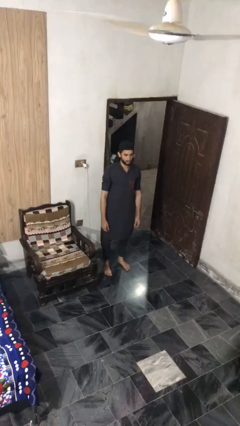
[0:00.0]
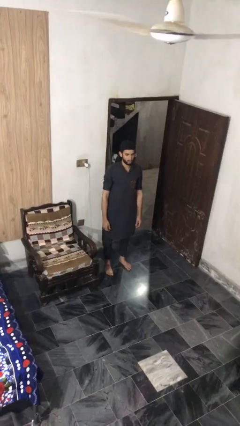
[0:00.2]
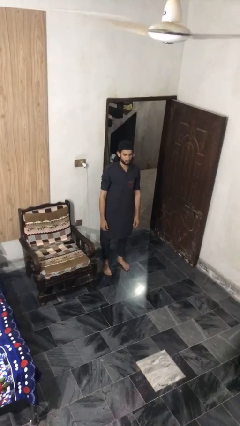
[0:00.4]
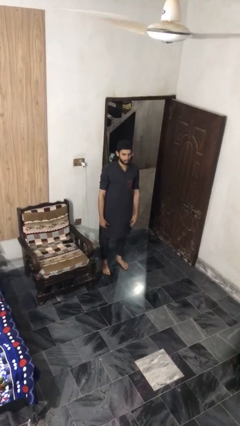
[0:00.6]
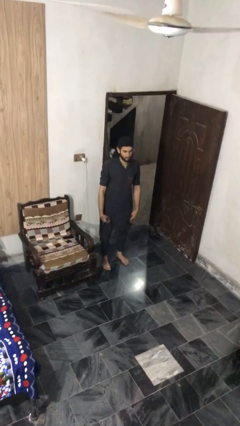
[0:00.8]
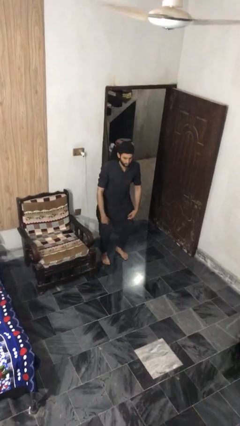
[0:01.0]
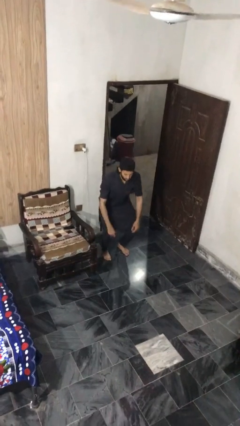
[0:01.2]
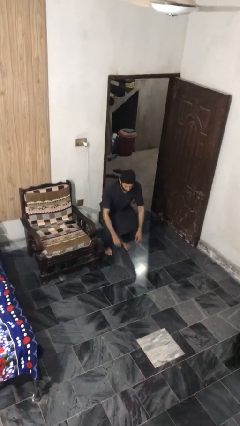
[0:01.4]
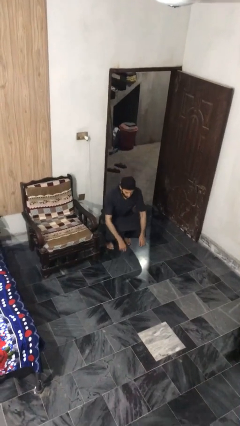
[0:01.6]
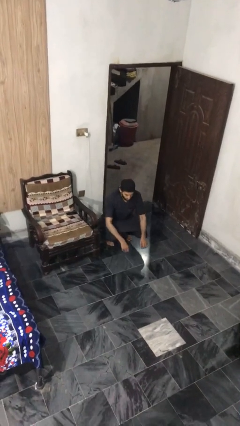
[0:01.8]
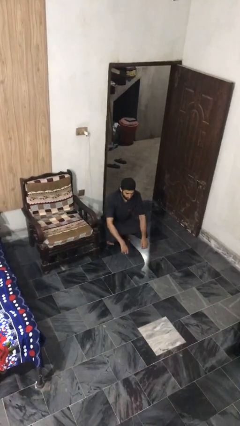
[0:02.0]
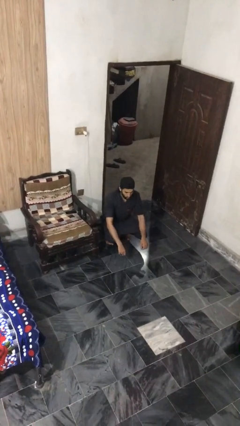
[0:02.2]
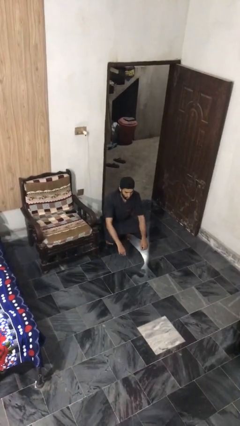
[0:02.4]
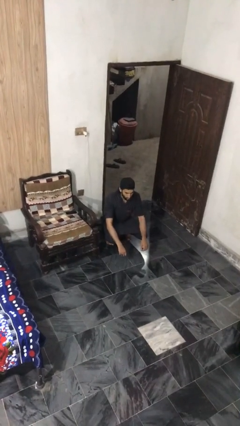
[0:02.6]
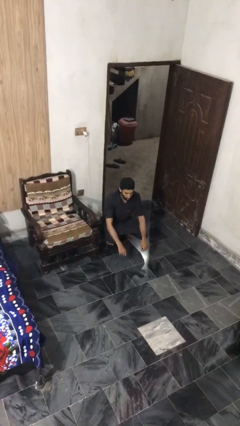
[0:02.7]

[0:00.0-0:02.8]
person squats

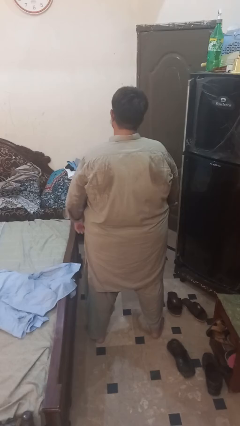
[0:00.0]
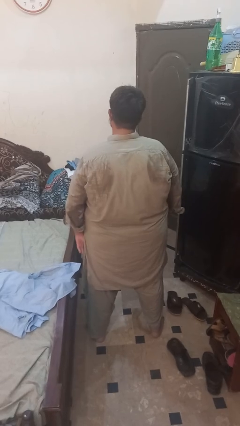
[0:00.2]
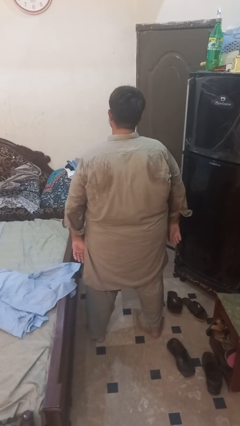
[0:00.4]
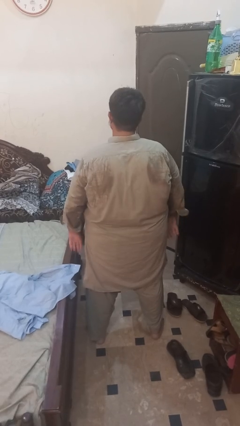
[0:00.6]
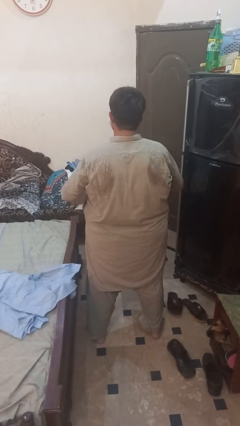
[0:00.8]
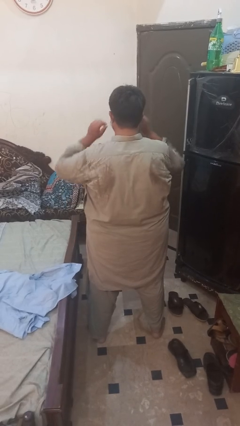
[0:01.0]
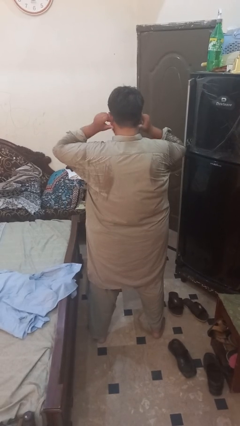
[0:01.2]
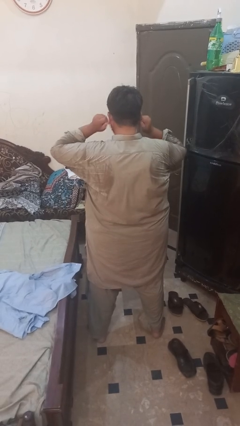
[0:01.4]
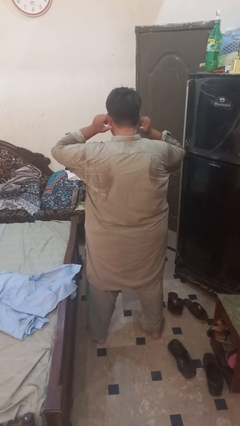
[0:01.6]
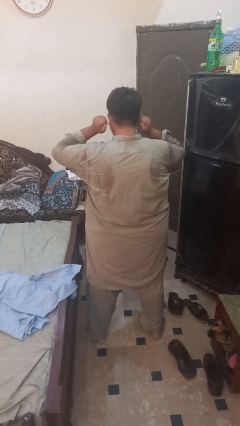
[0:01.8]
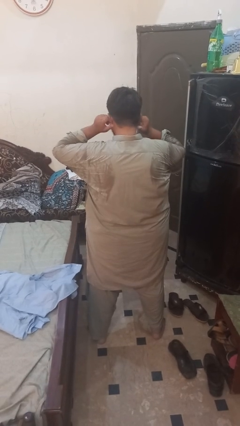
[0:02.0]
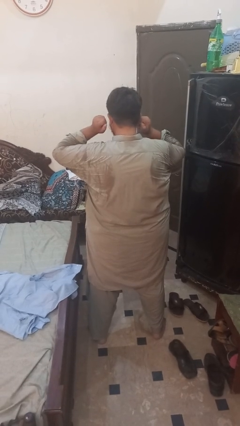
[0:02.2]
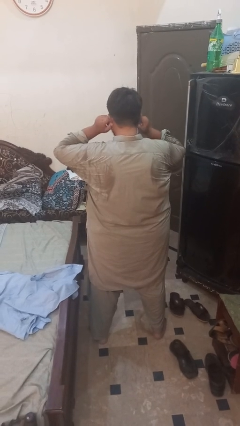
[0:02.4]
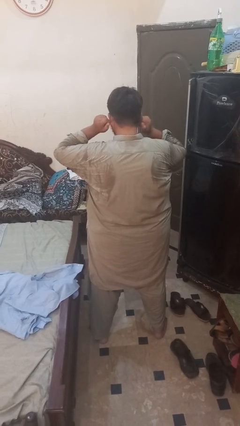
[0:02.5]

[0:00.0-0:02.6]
person touches earlobe

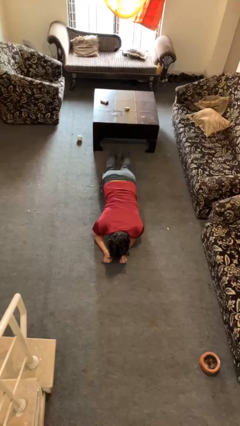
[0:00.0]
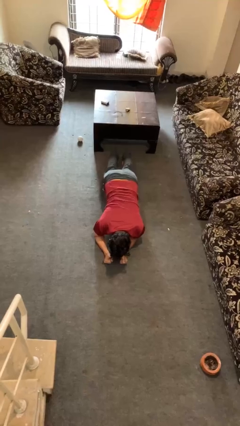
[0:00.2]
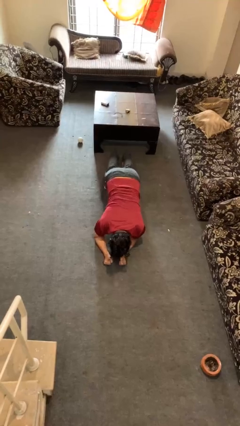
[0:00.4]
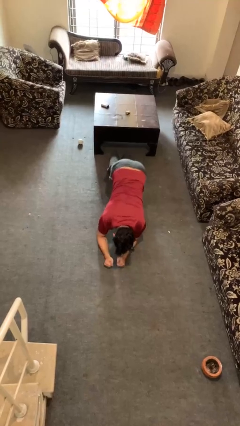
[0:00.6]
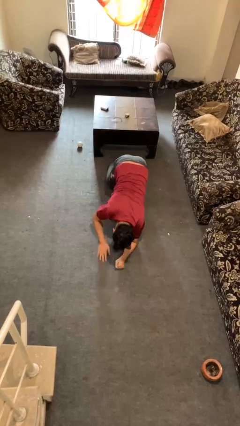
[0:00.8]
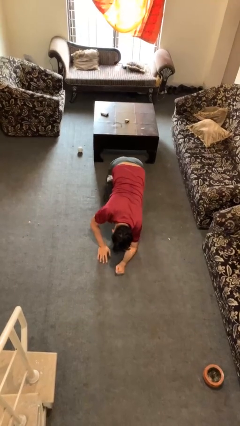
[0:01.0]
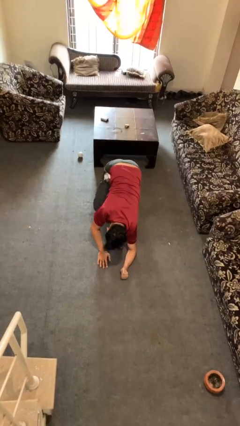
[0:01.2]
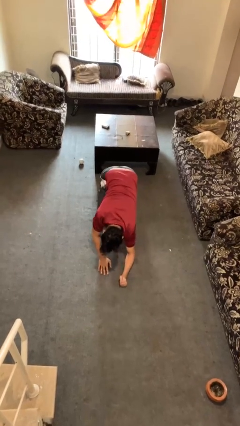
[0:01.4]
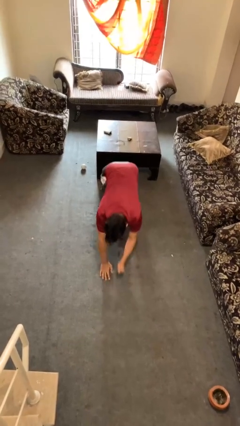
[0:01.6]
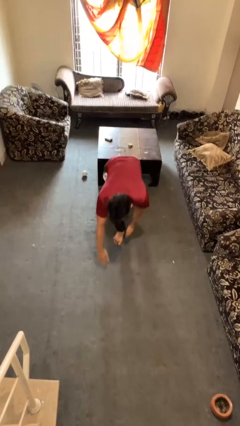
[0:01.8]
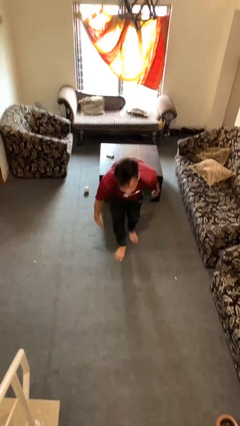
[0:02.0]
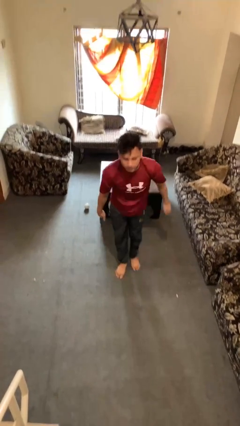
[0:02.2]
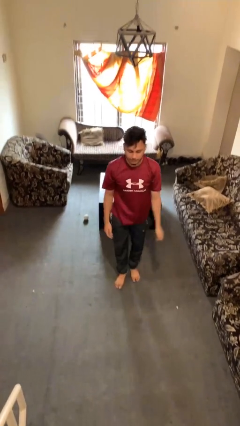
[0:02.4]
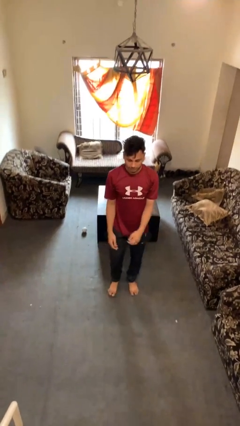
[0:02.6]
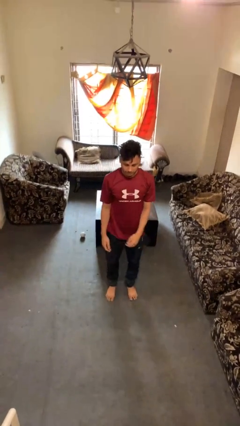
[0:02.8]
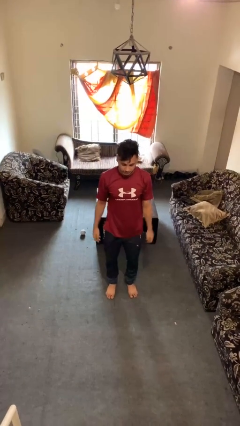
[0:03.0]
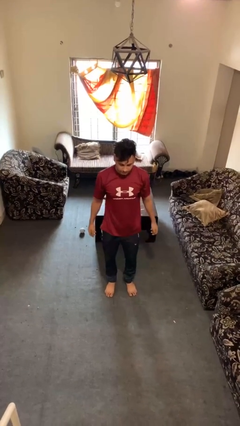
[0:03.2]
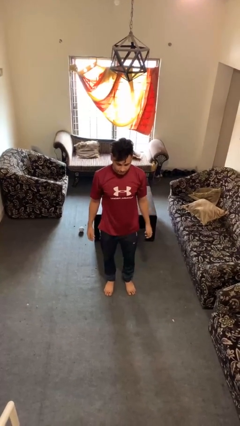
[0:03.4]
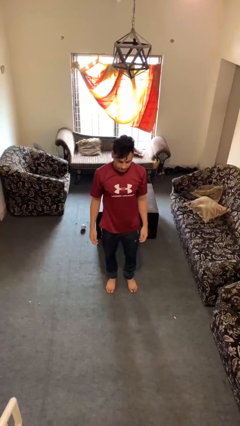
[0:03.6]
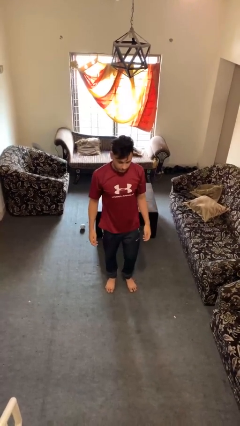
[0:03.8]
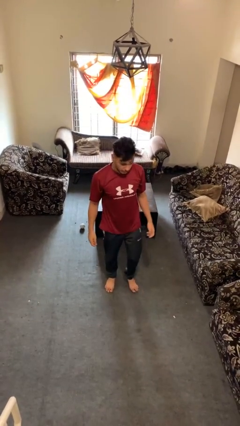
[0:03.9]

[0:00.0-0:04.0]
person stands up from floor

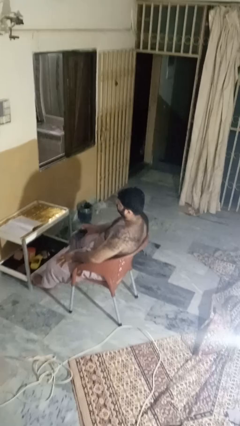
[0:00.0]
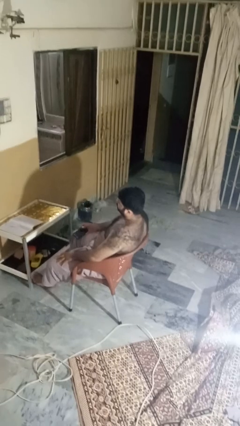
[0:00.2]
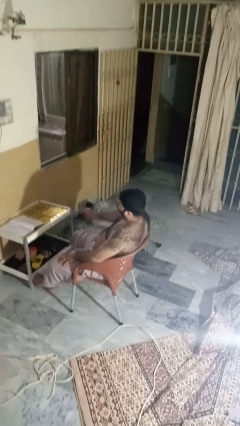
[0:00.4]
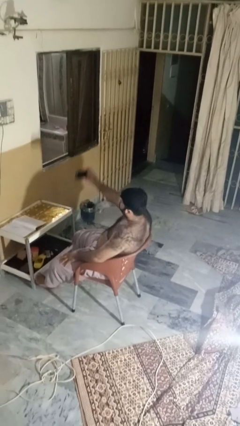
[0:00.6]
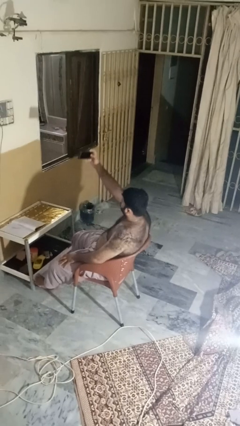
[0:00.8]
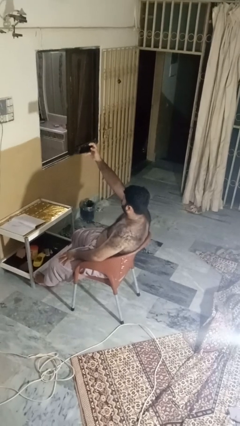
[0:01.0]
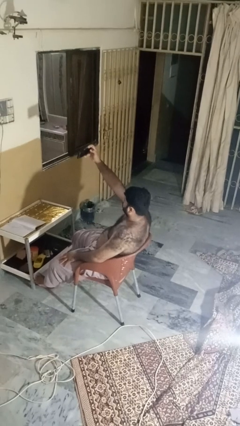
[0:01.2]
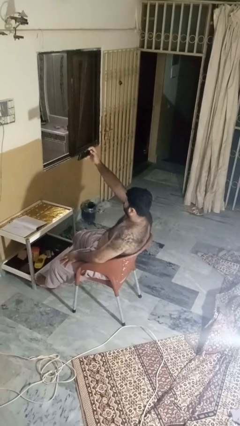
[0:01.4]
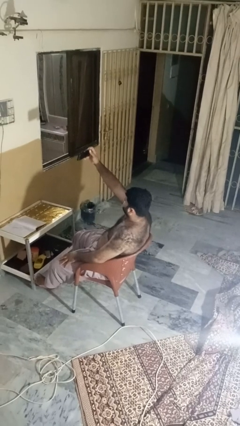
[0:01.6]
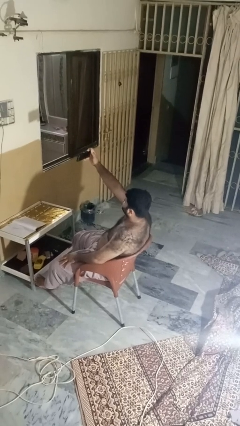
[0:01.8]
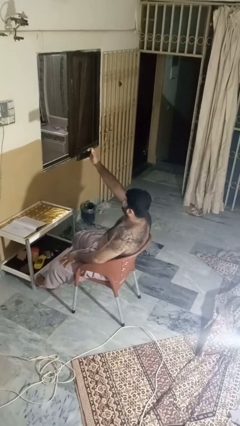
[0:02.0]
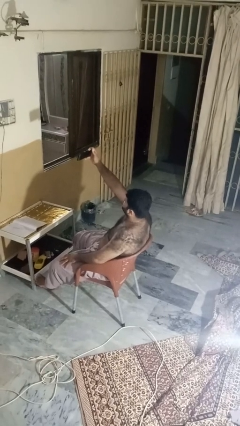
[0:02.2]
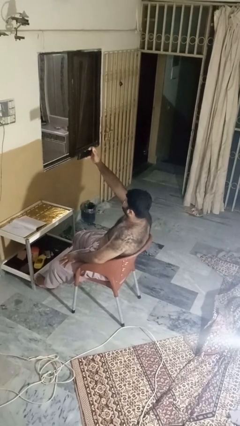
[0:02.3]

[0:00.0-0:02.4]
person takes selfie

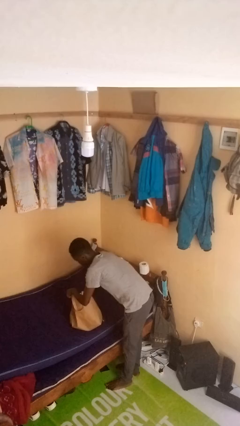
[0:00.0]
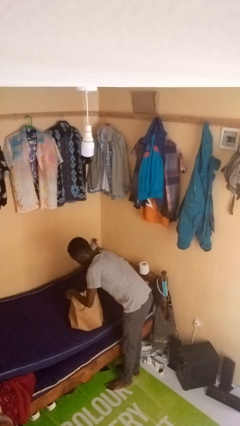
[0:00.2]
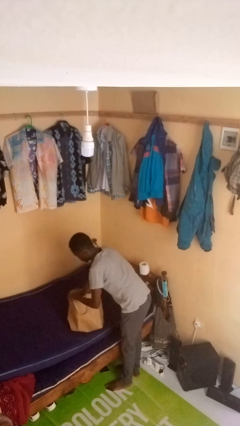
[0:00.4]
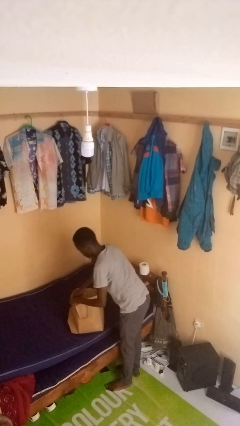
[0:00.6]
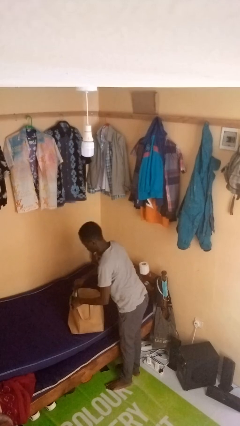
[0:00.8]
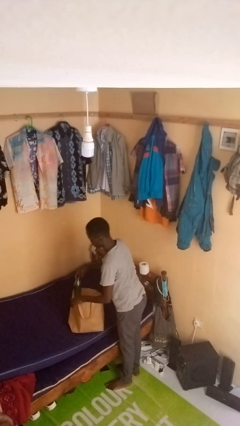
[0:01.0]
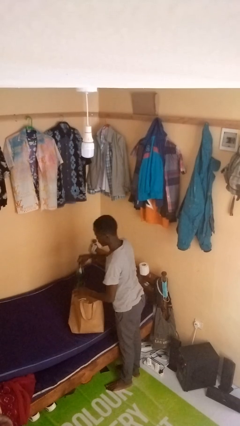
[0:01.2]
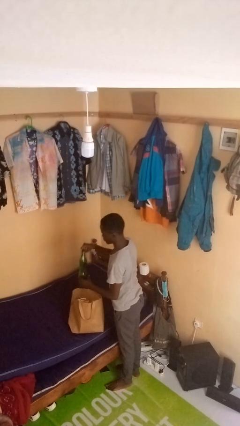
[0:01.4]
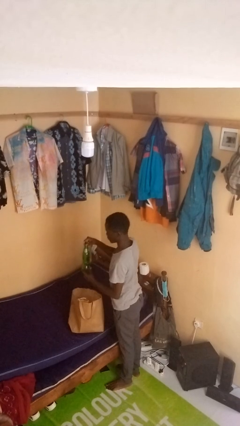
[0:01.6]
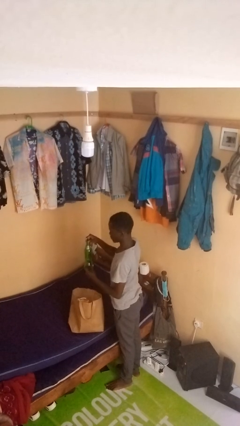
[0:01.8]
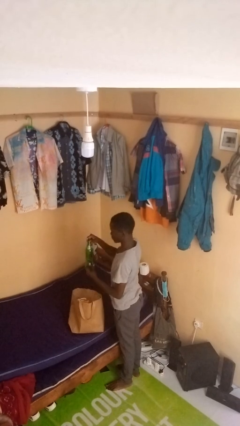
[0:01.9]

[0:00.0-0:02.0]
person takes object from bag

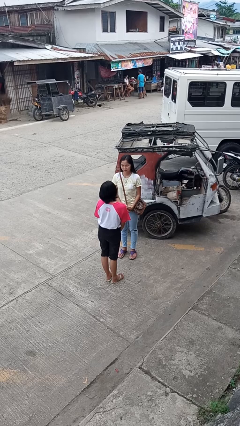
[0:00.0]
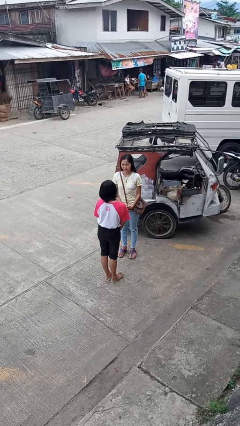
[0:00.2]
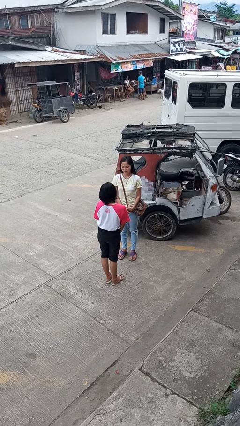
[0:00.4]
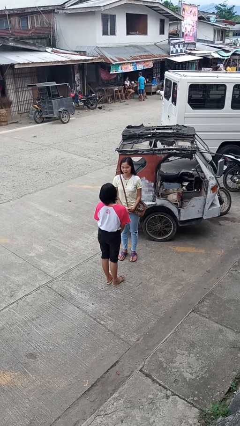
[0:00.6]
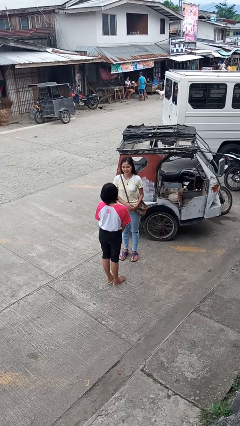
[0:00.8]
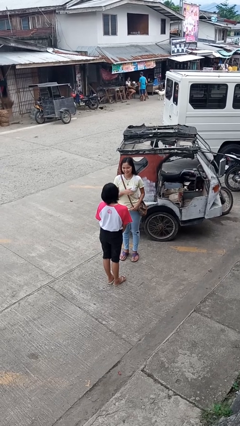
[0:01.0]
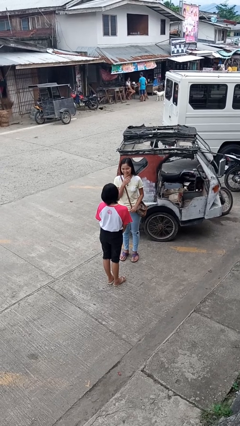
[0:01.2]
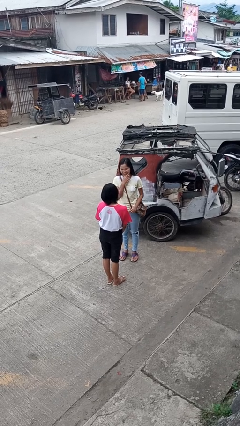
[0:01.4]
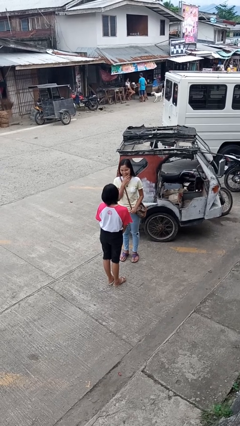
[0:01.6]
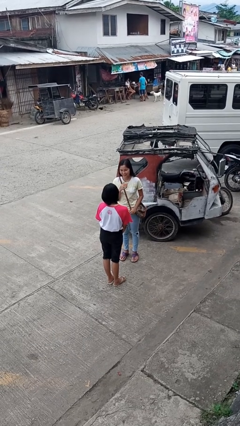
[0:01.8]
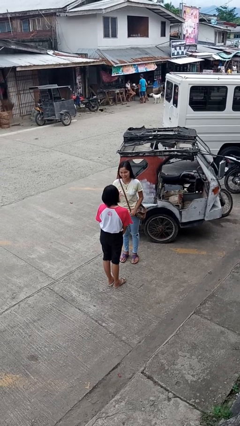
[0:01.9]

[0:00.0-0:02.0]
person laughs with person

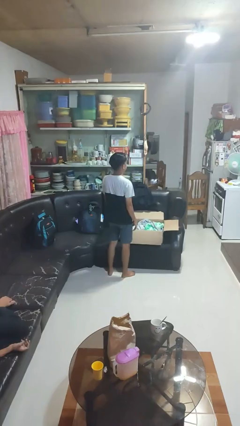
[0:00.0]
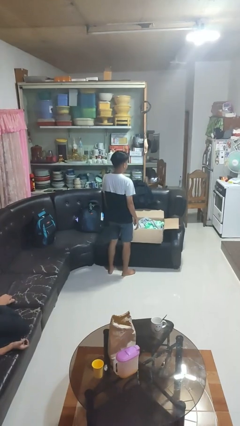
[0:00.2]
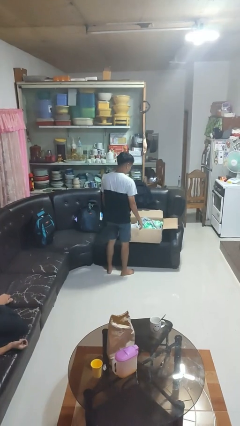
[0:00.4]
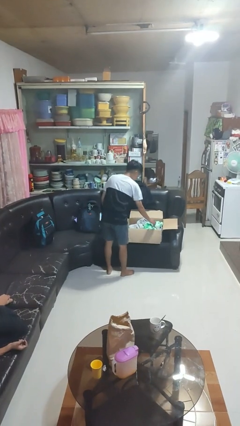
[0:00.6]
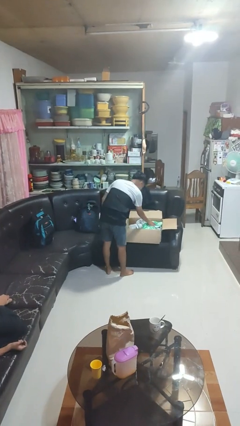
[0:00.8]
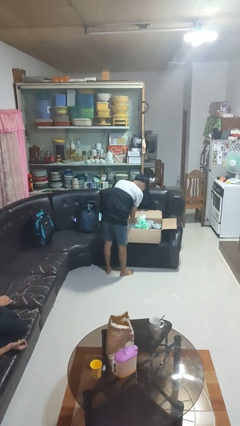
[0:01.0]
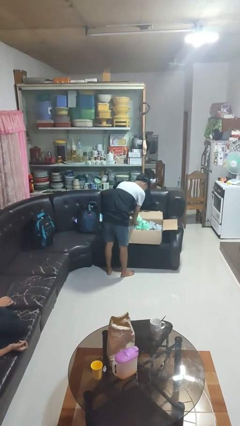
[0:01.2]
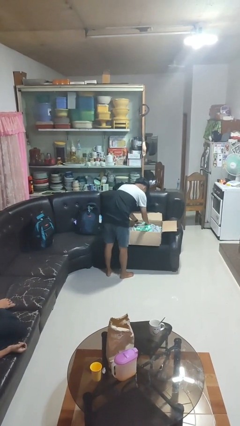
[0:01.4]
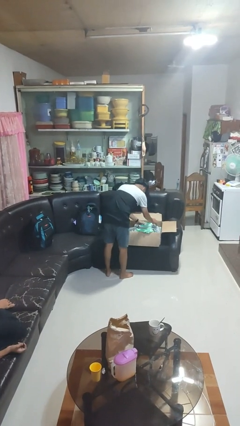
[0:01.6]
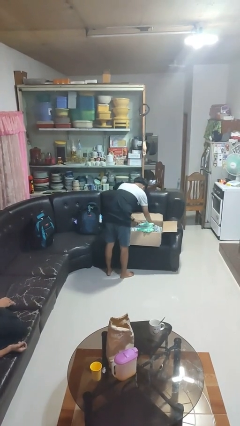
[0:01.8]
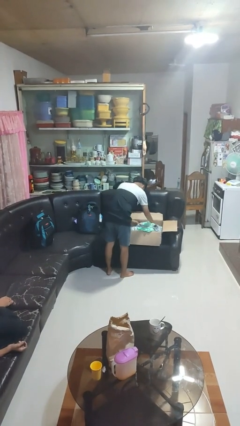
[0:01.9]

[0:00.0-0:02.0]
person searches in box
